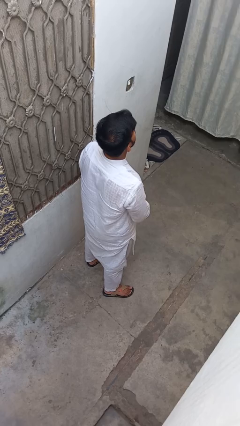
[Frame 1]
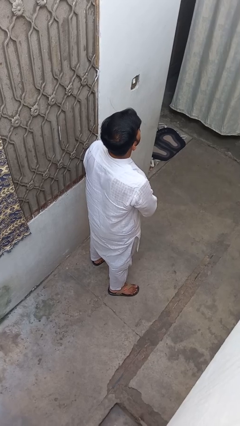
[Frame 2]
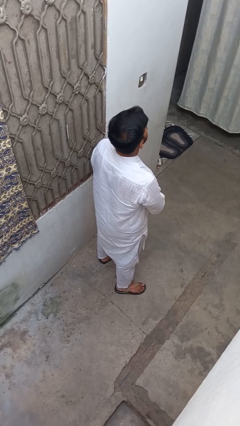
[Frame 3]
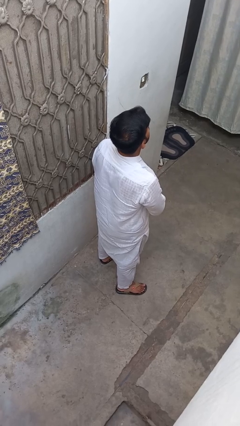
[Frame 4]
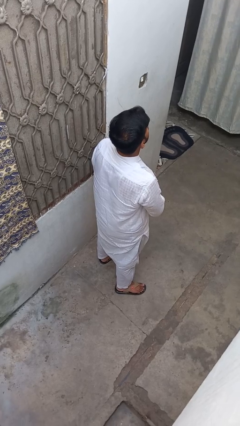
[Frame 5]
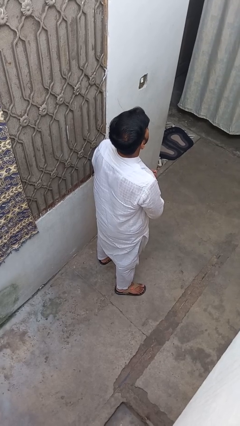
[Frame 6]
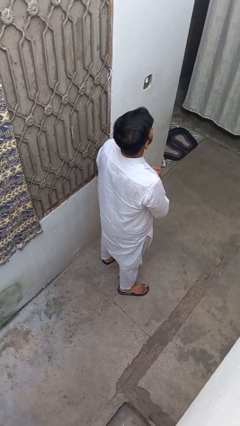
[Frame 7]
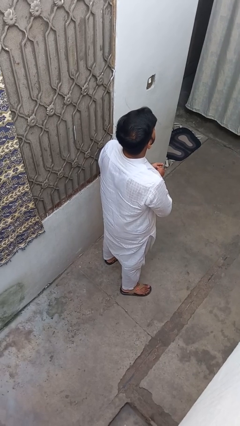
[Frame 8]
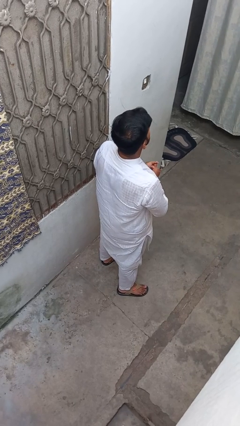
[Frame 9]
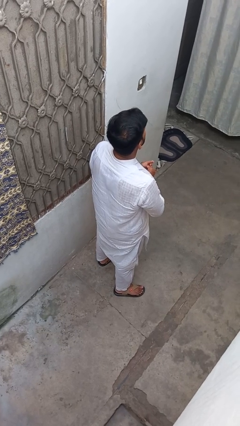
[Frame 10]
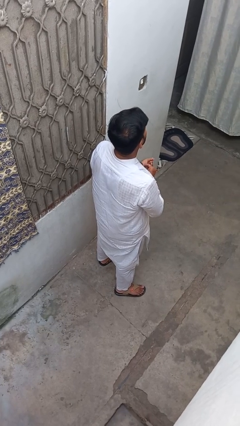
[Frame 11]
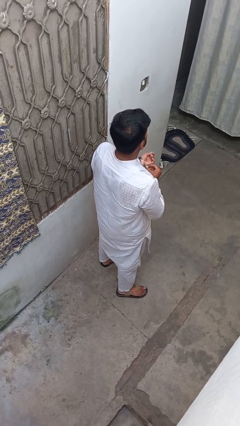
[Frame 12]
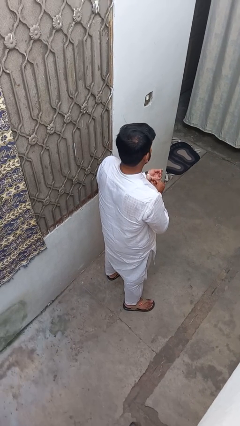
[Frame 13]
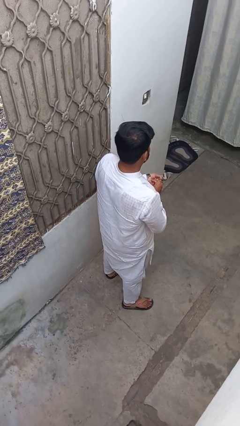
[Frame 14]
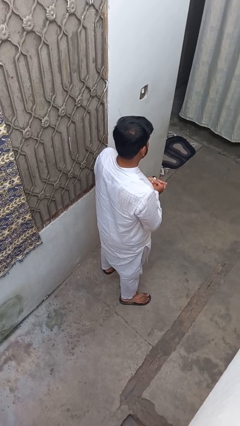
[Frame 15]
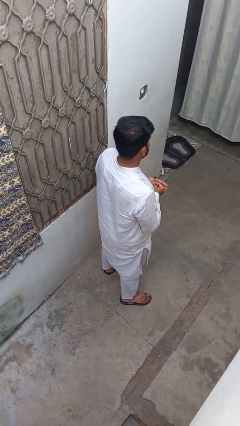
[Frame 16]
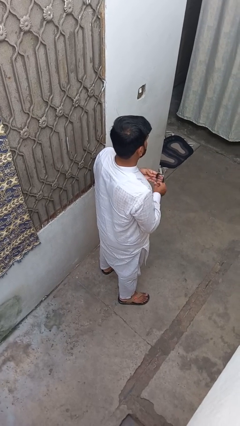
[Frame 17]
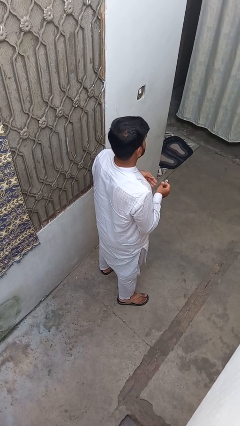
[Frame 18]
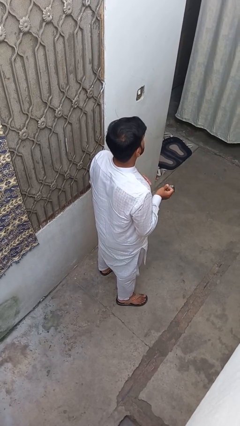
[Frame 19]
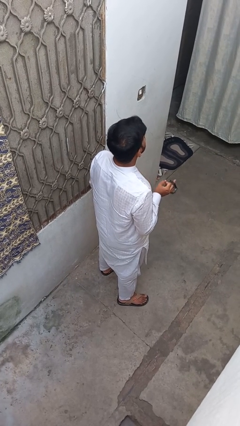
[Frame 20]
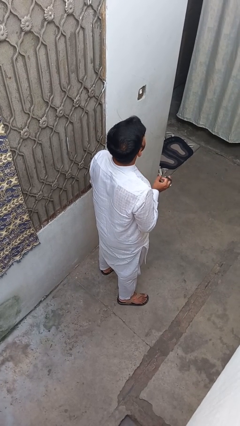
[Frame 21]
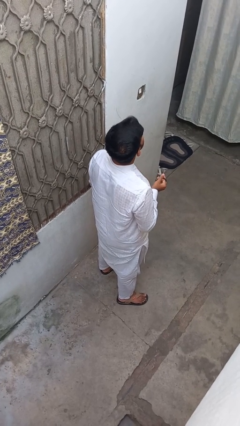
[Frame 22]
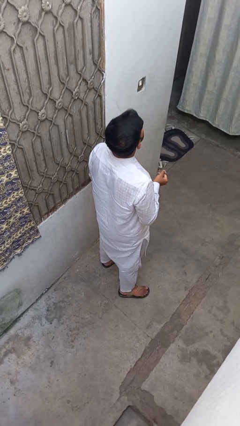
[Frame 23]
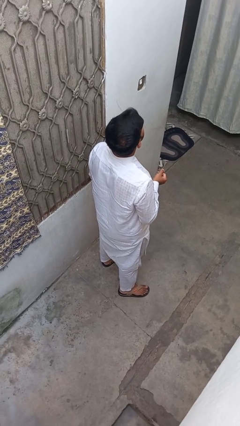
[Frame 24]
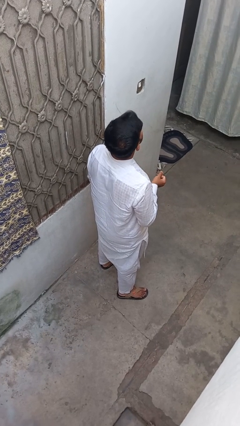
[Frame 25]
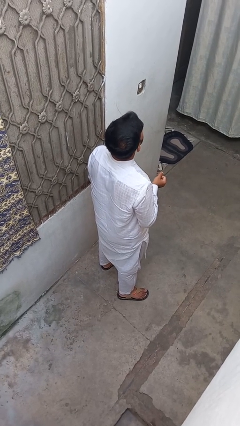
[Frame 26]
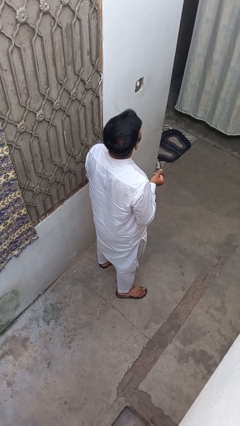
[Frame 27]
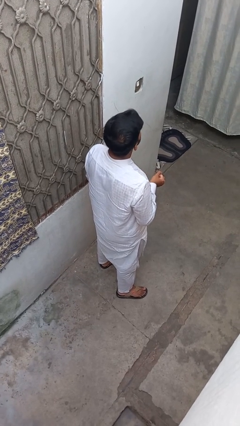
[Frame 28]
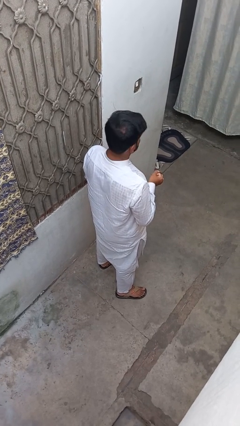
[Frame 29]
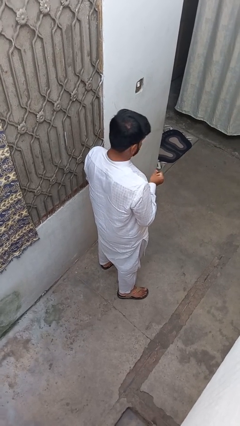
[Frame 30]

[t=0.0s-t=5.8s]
person takes off wristwatch

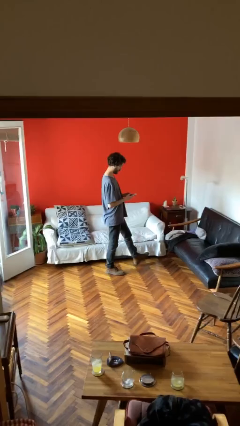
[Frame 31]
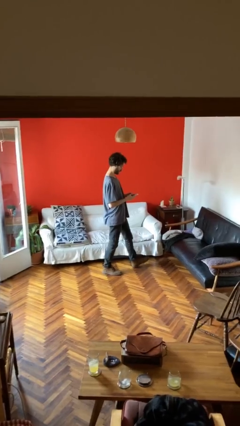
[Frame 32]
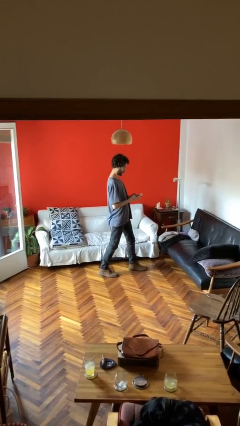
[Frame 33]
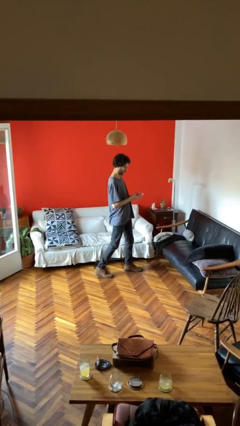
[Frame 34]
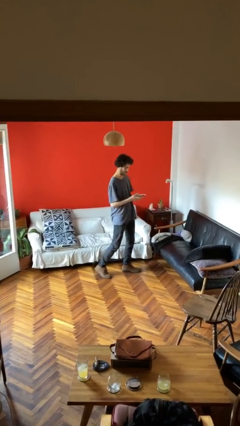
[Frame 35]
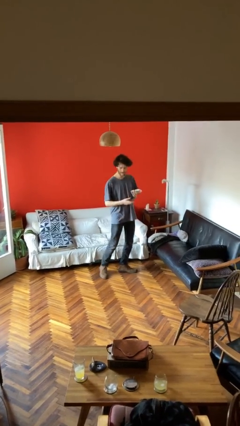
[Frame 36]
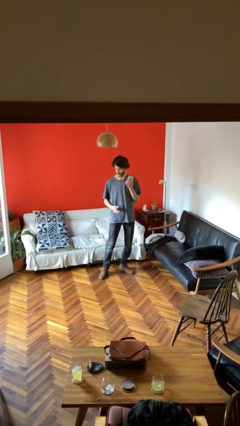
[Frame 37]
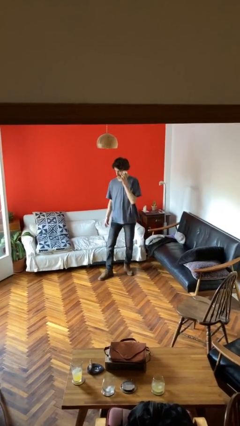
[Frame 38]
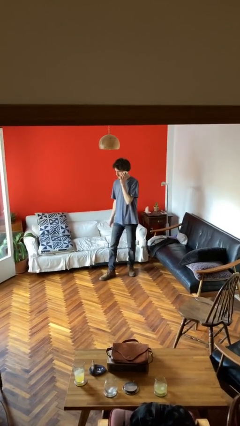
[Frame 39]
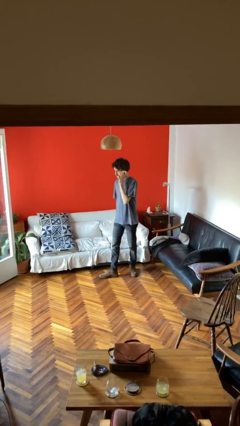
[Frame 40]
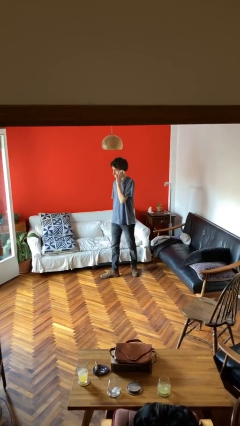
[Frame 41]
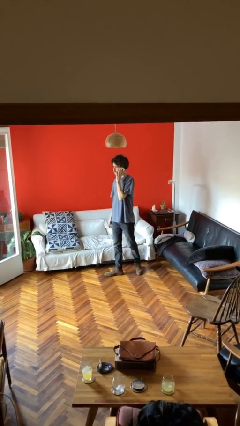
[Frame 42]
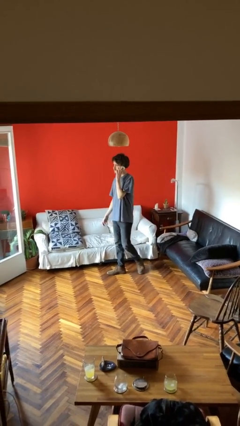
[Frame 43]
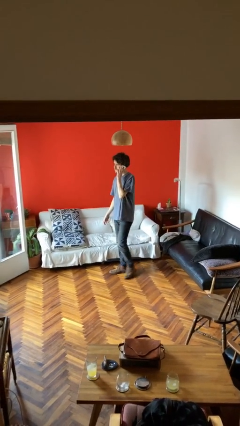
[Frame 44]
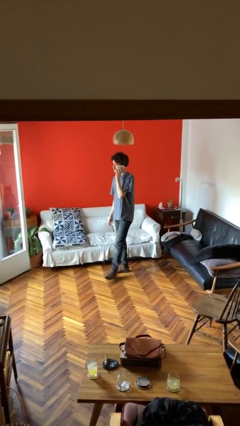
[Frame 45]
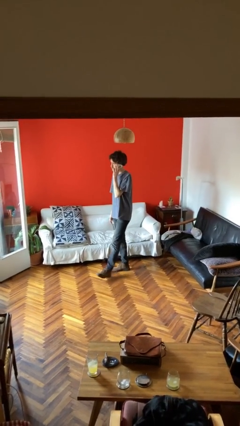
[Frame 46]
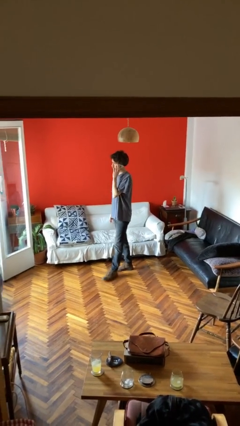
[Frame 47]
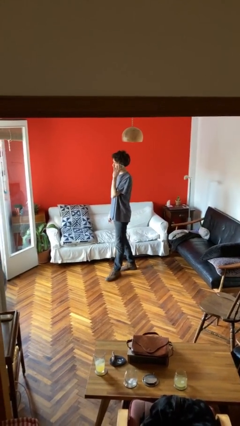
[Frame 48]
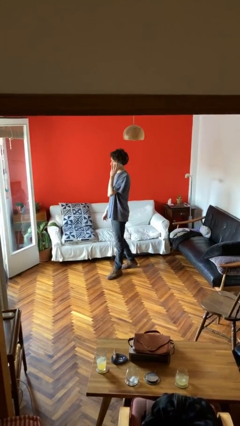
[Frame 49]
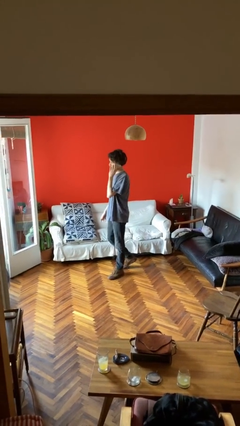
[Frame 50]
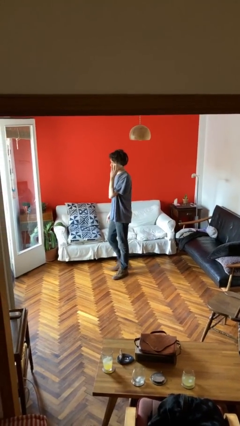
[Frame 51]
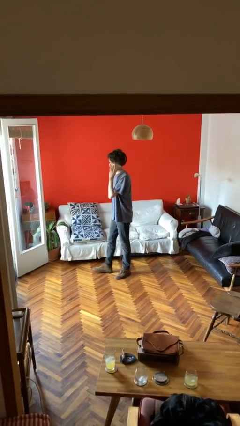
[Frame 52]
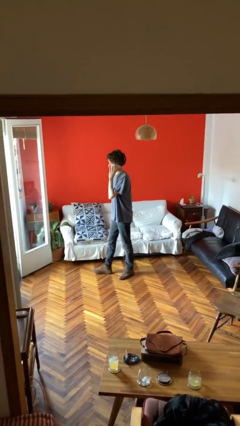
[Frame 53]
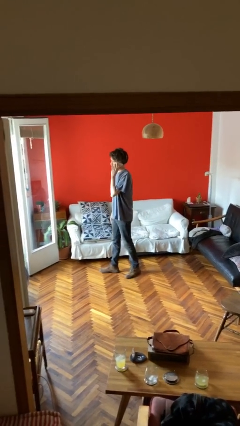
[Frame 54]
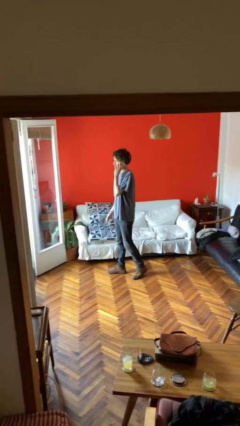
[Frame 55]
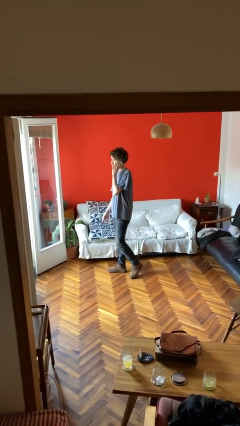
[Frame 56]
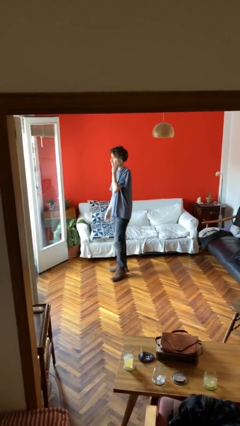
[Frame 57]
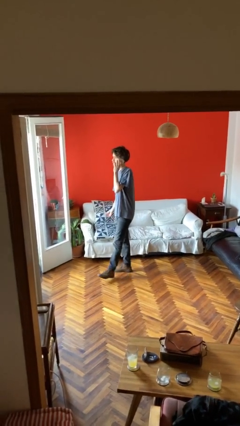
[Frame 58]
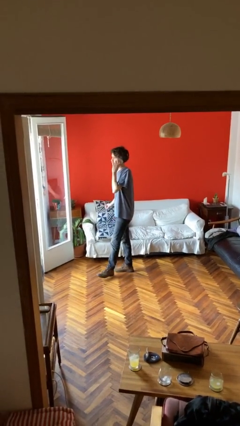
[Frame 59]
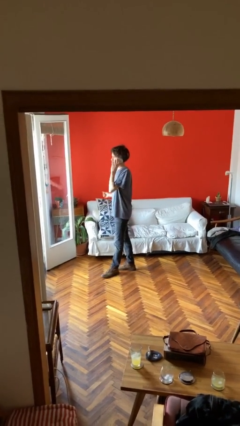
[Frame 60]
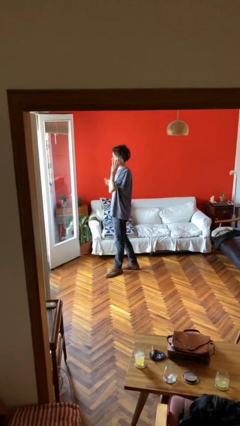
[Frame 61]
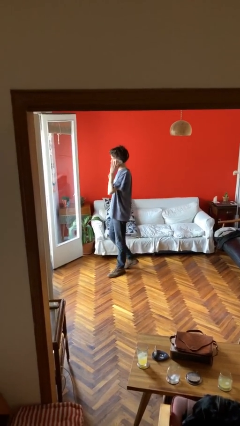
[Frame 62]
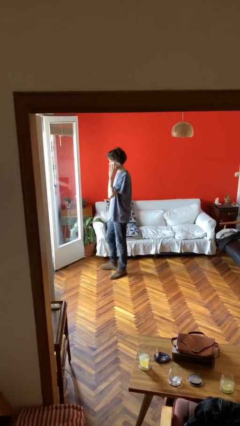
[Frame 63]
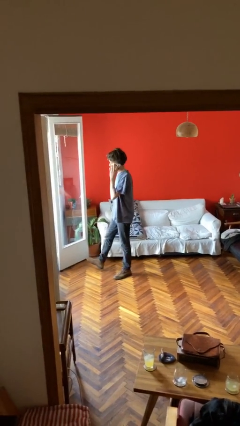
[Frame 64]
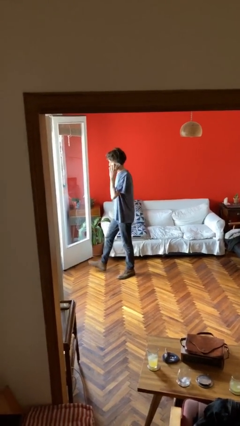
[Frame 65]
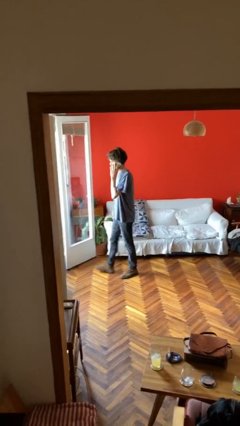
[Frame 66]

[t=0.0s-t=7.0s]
person talks on phone

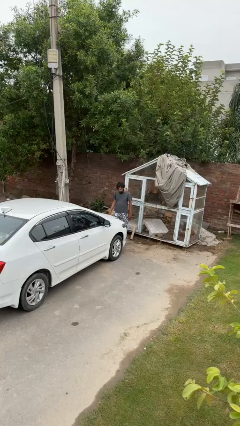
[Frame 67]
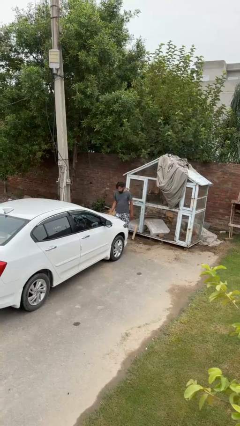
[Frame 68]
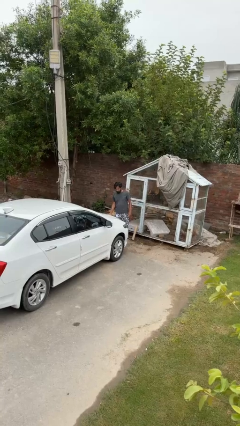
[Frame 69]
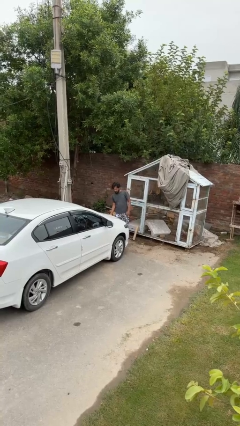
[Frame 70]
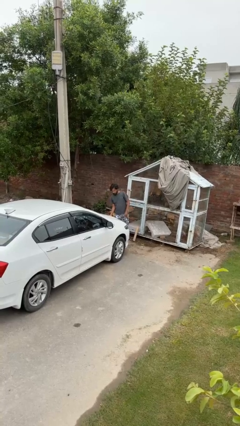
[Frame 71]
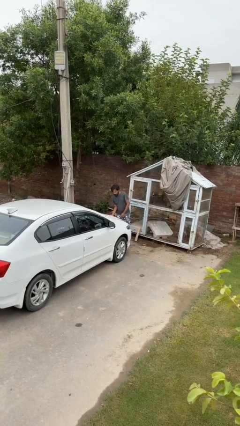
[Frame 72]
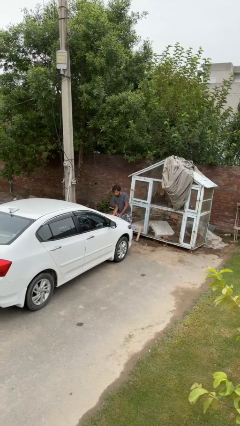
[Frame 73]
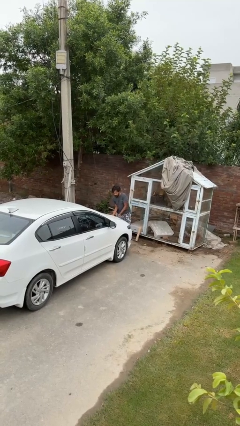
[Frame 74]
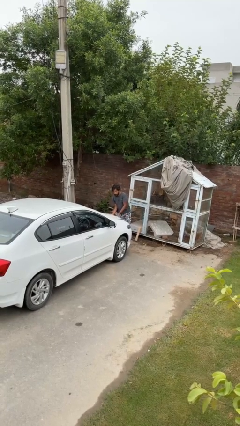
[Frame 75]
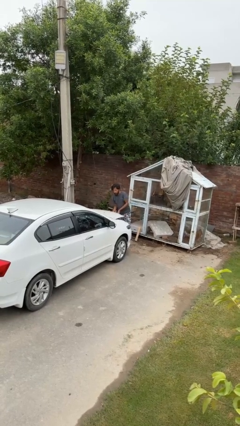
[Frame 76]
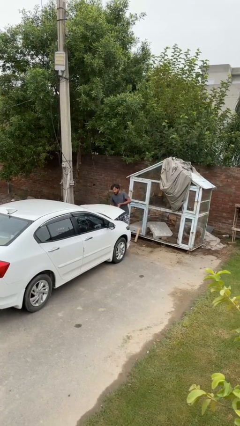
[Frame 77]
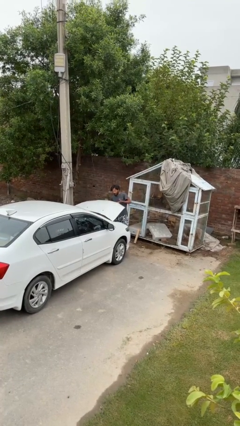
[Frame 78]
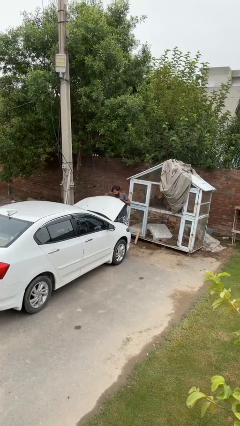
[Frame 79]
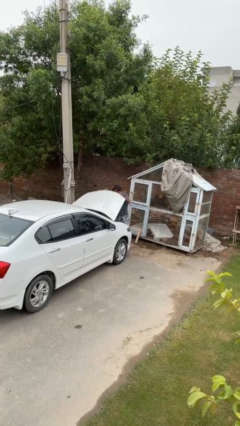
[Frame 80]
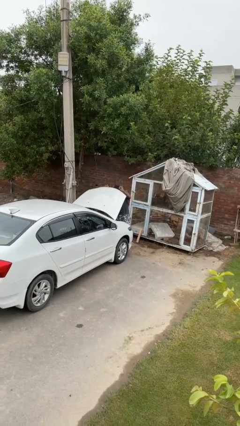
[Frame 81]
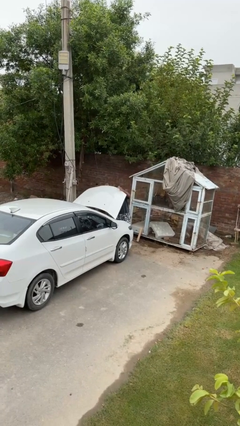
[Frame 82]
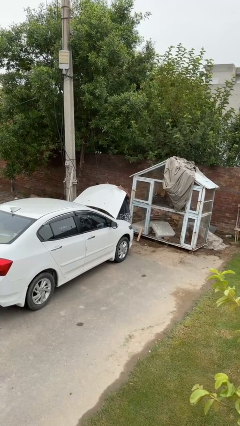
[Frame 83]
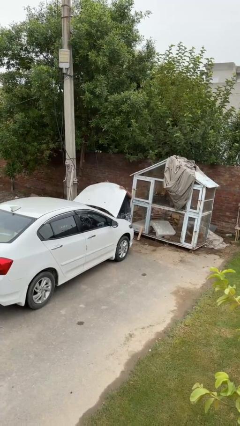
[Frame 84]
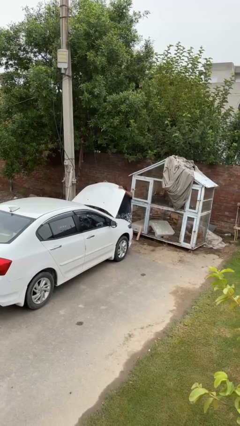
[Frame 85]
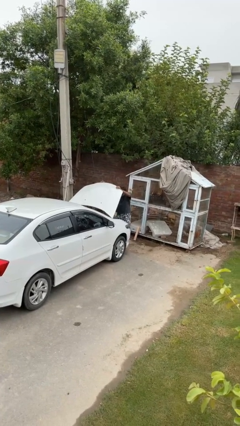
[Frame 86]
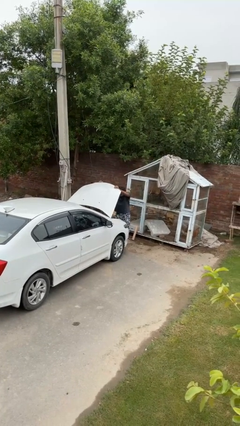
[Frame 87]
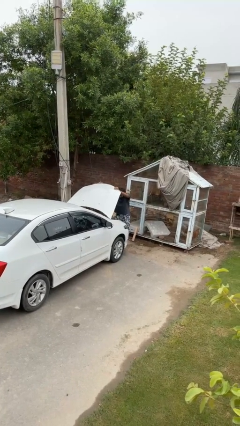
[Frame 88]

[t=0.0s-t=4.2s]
person opens car hood

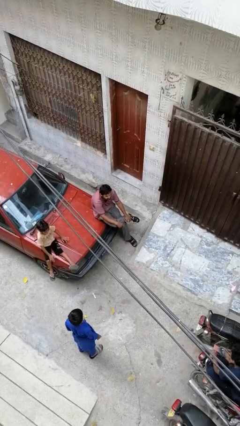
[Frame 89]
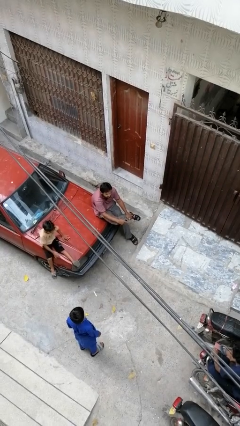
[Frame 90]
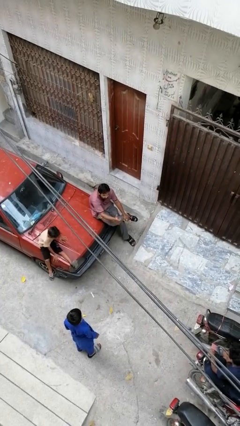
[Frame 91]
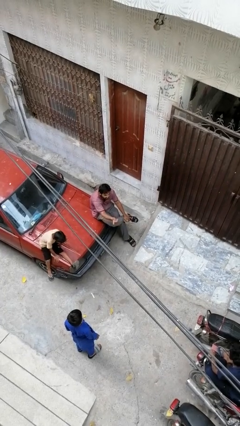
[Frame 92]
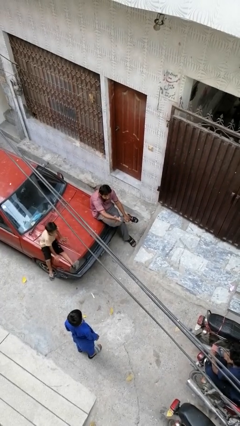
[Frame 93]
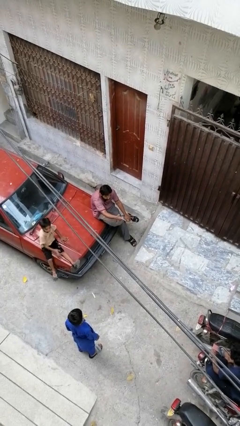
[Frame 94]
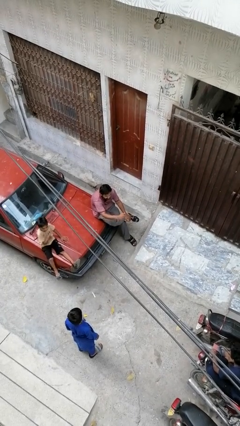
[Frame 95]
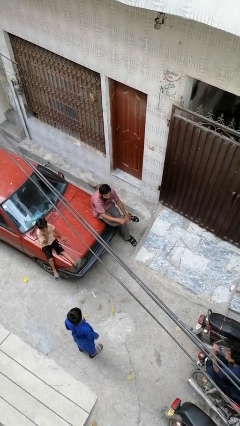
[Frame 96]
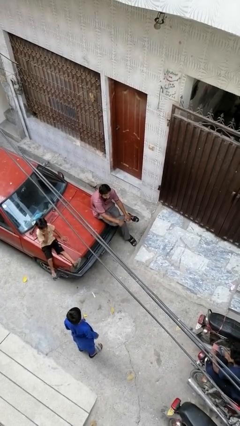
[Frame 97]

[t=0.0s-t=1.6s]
person points at person
